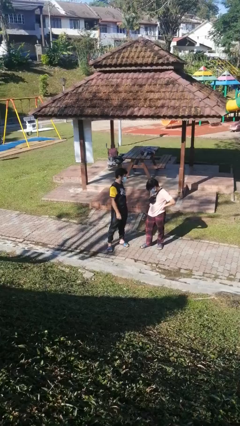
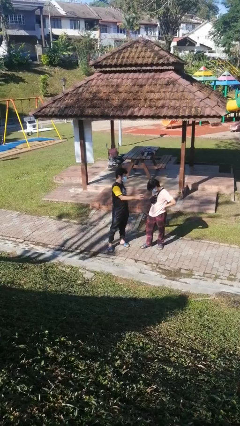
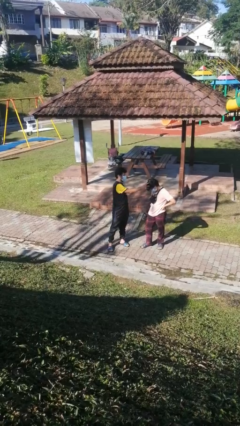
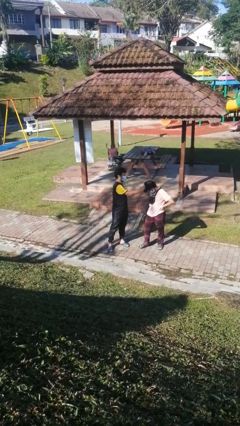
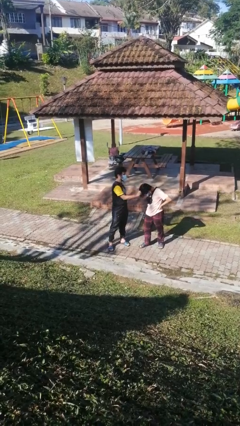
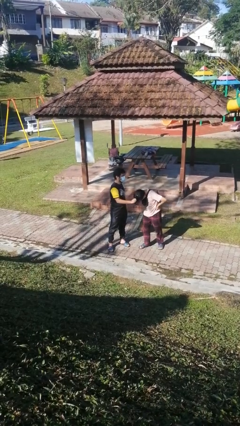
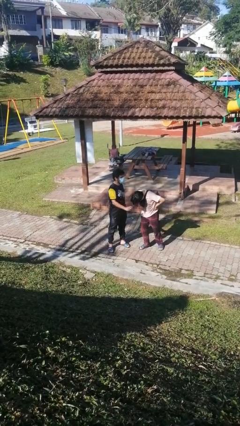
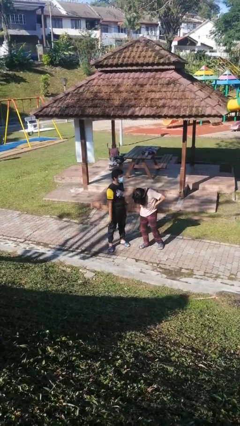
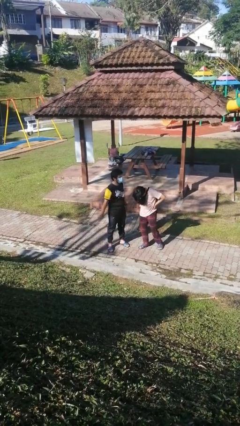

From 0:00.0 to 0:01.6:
person grabs person by hair

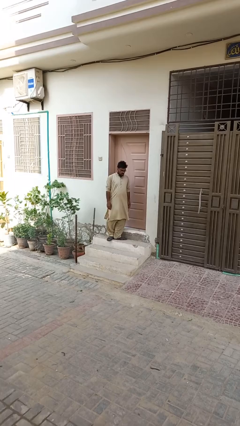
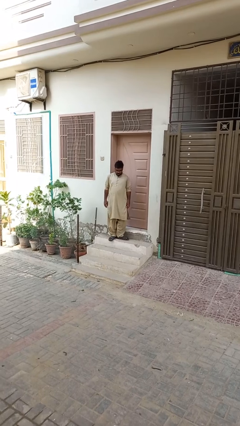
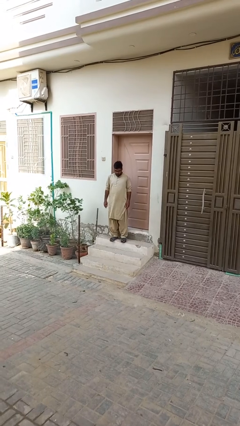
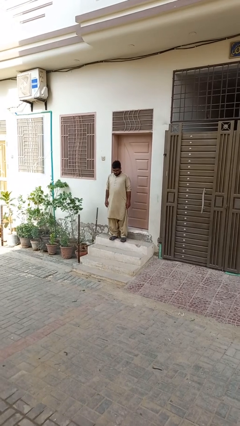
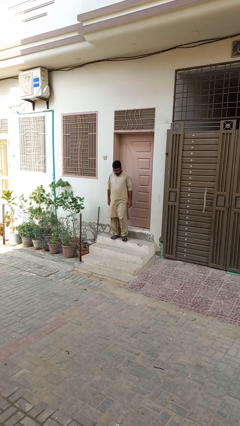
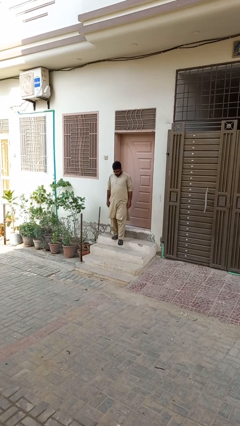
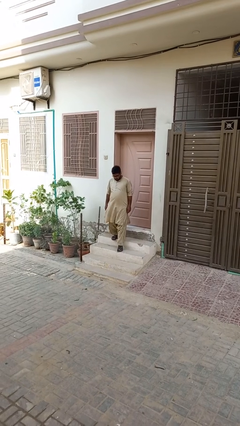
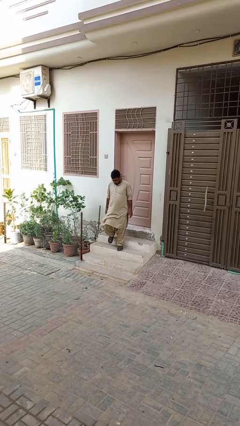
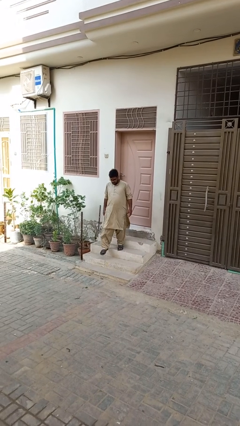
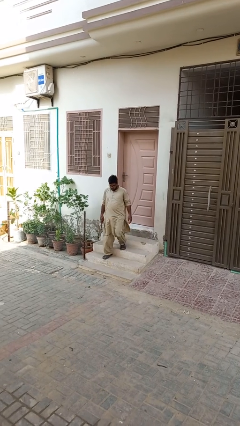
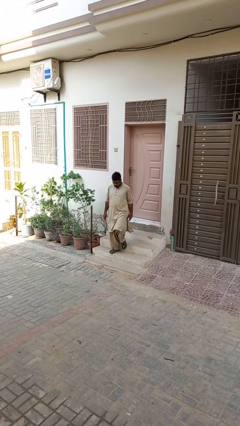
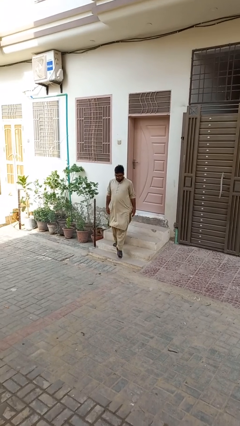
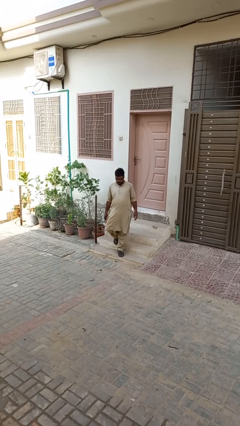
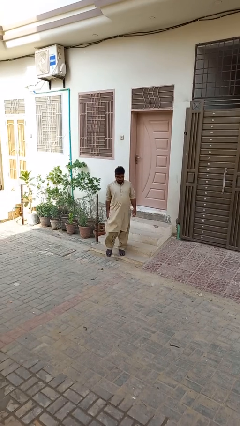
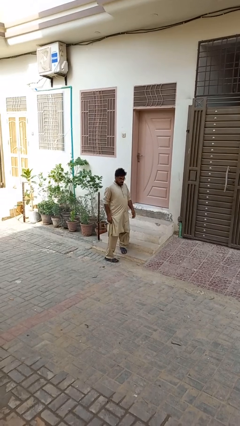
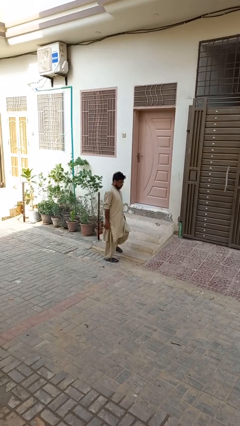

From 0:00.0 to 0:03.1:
person climbs down stairs

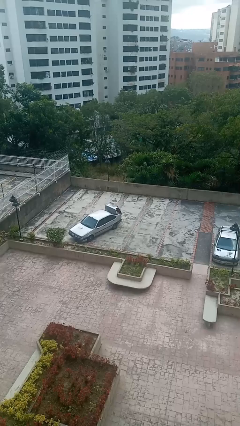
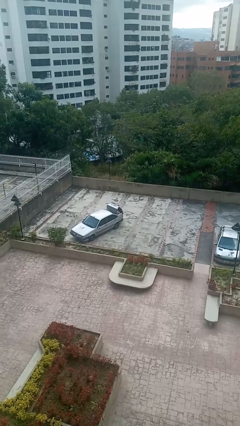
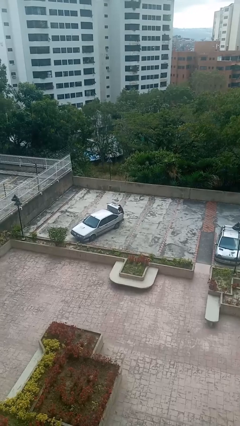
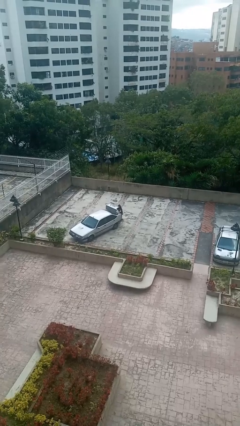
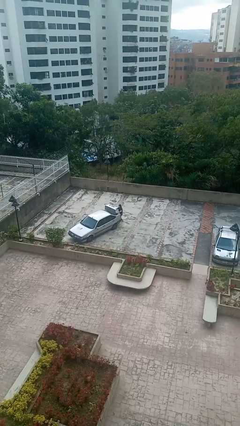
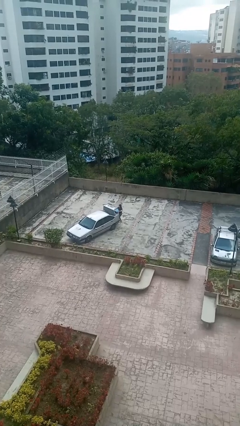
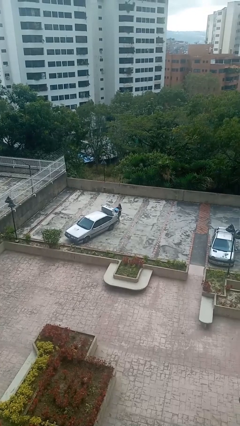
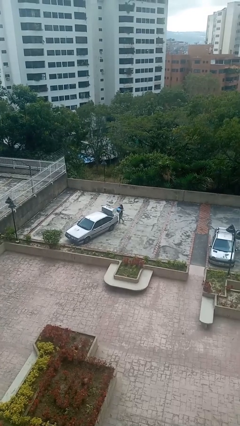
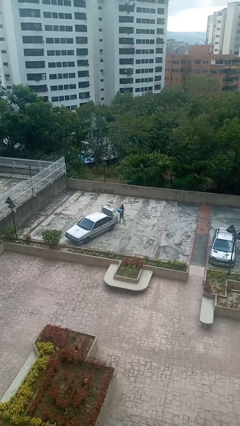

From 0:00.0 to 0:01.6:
person unloads car

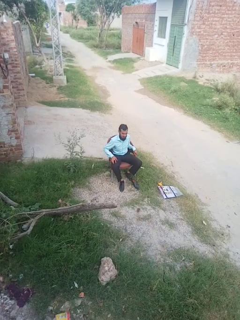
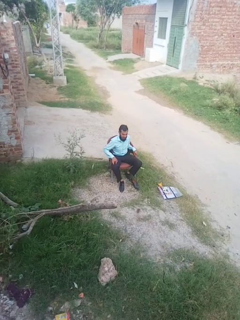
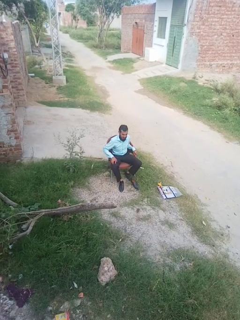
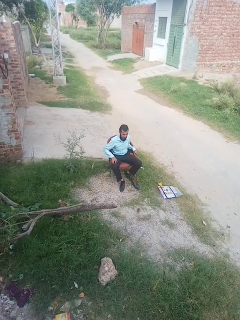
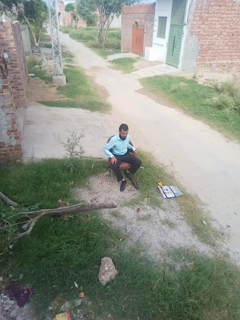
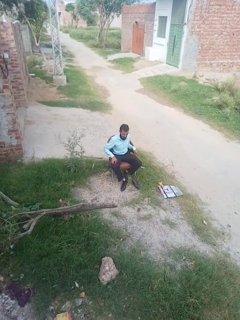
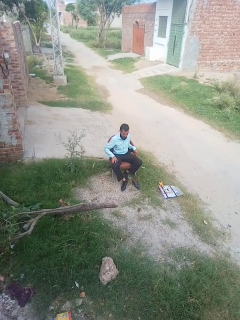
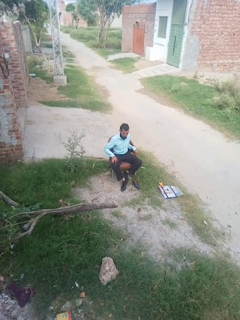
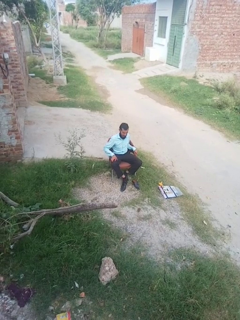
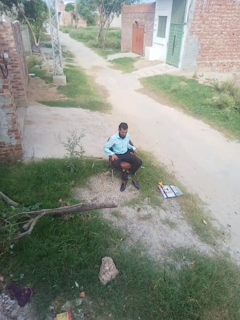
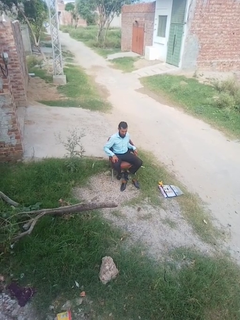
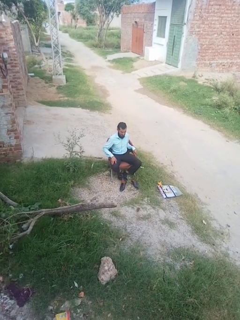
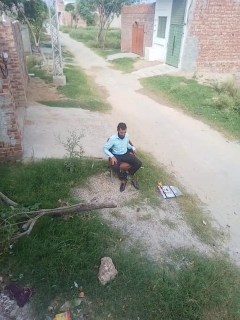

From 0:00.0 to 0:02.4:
person takes off shoes

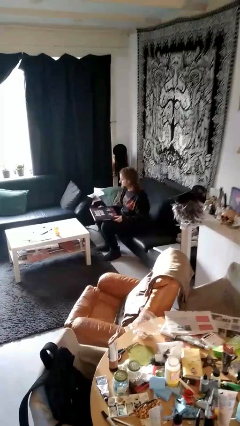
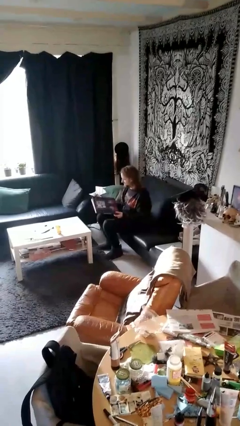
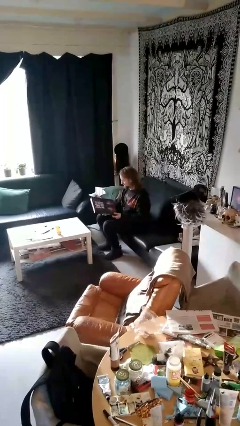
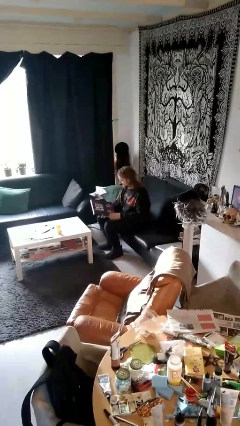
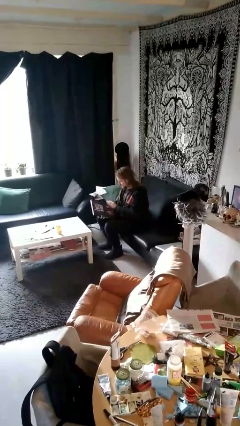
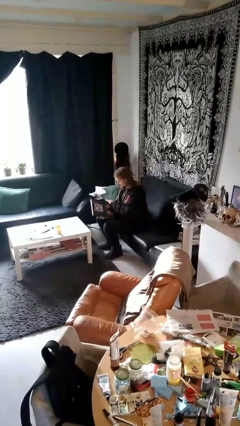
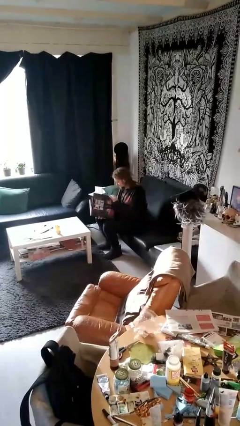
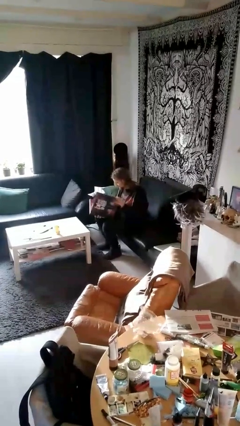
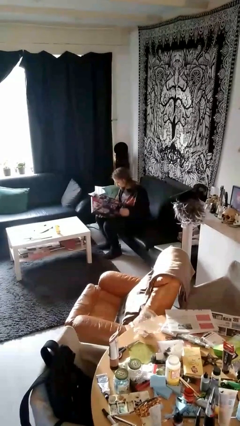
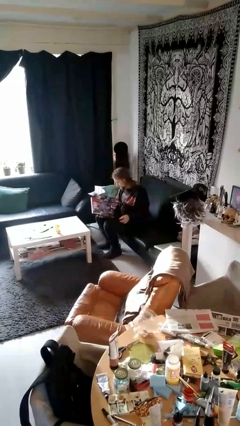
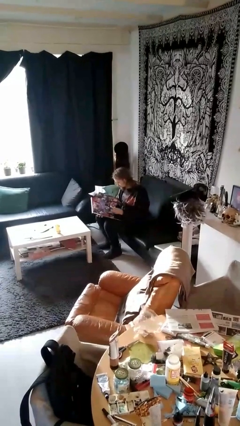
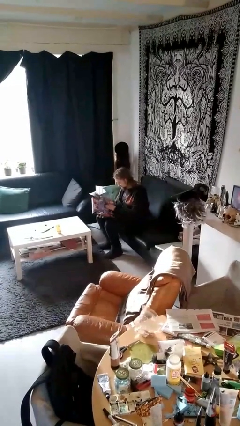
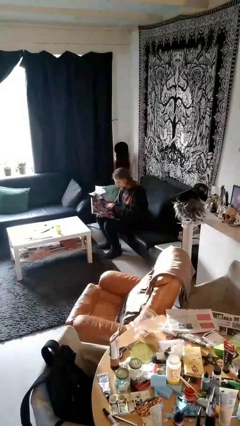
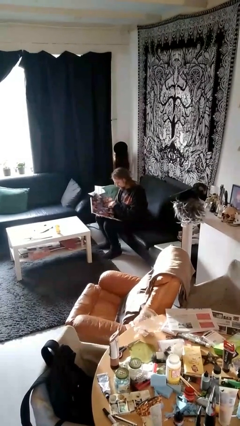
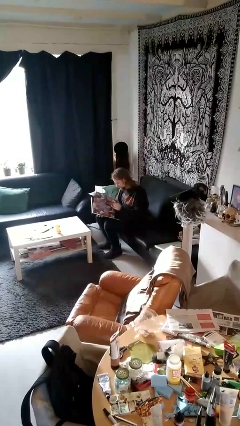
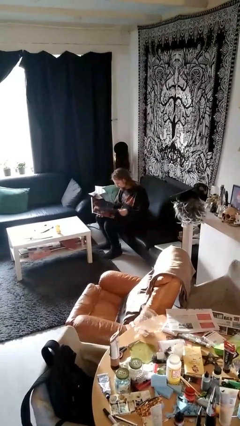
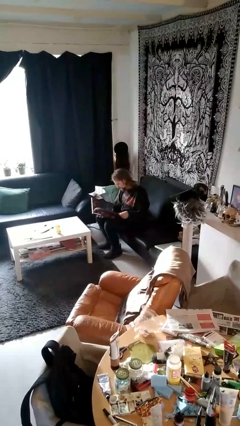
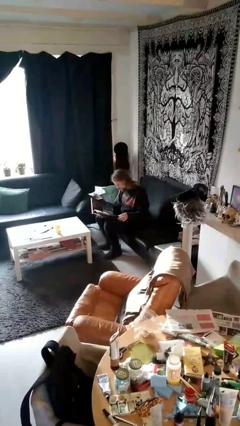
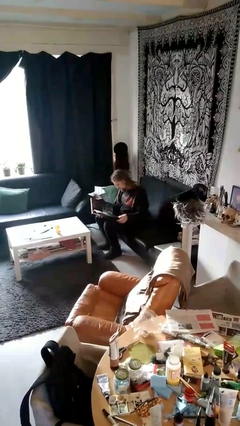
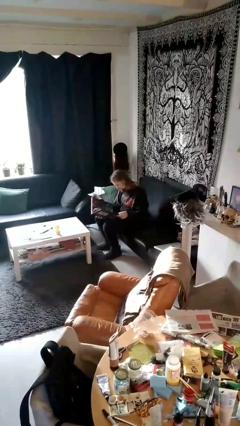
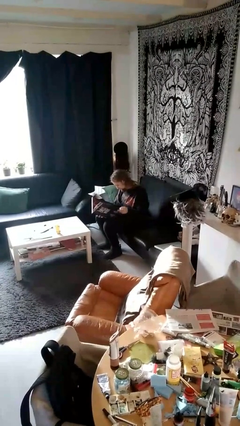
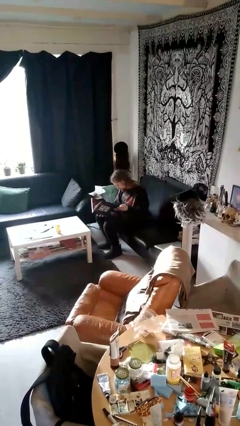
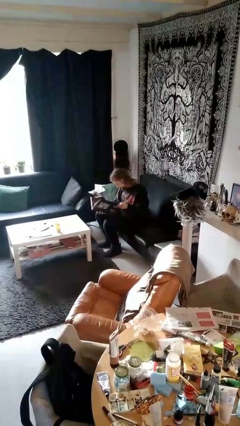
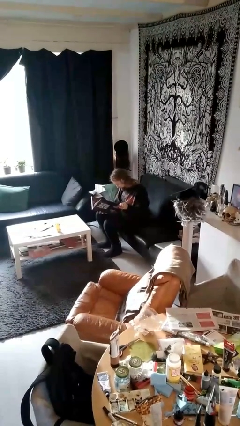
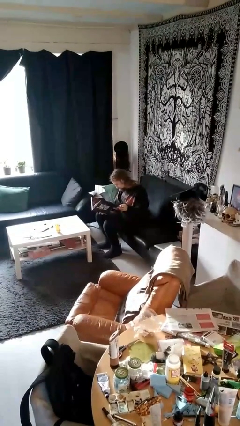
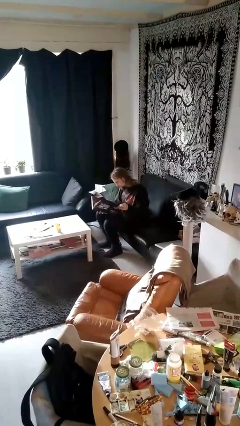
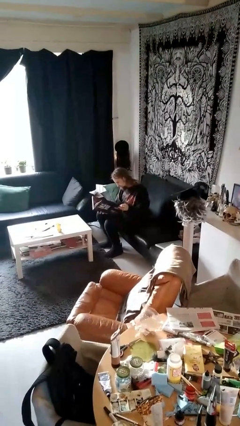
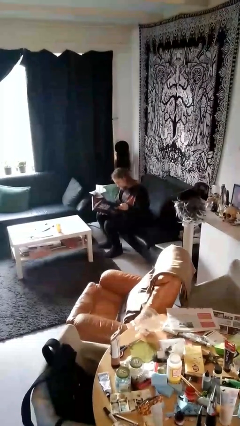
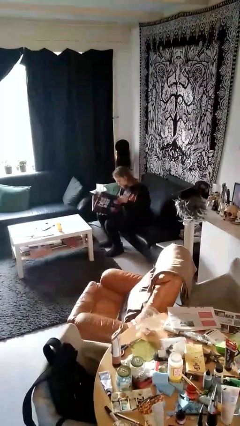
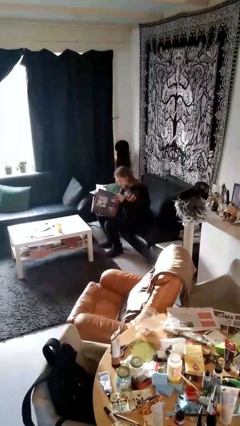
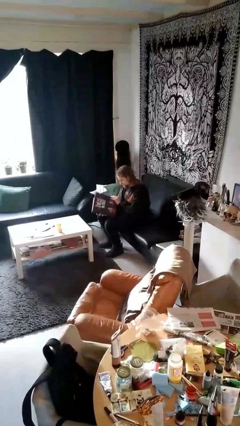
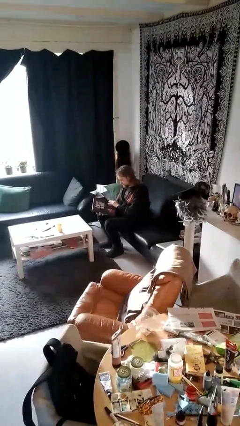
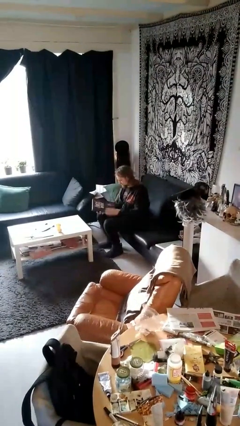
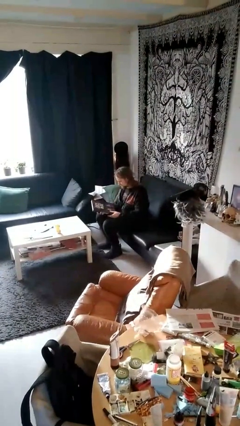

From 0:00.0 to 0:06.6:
person reads document

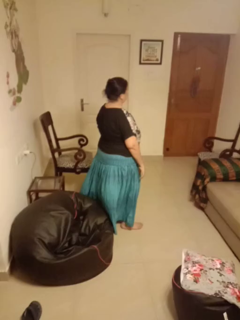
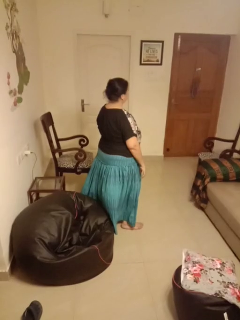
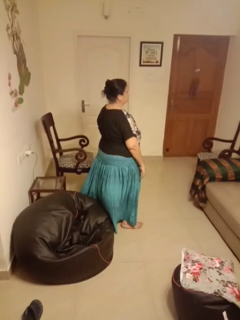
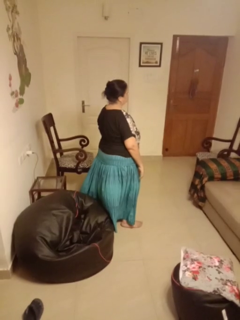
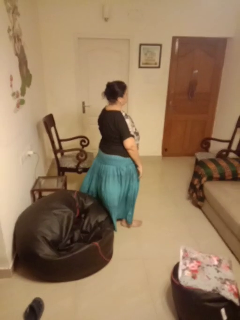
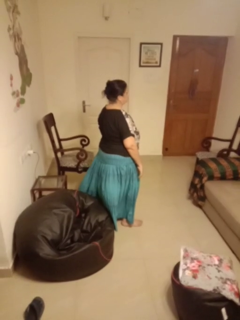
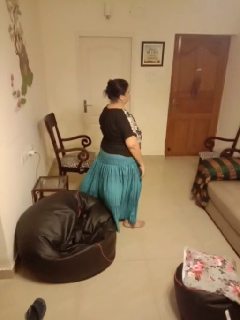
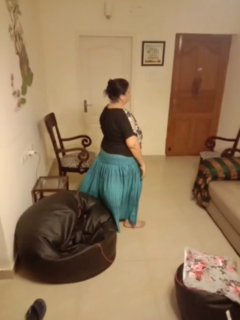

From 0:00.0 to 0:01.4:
person shakes head

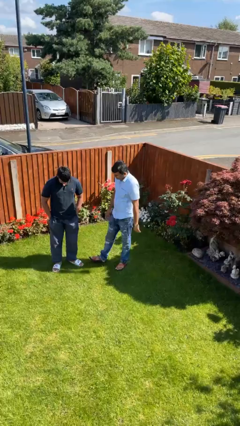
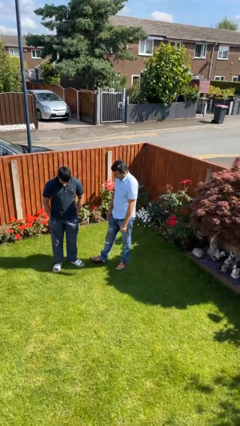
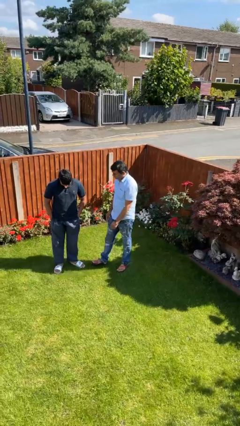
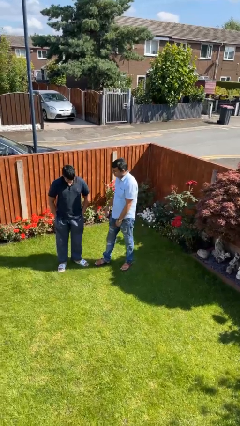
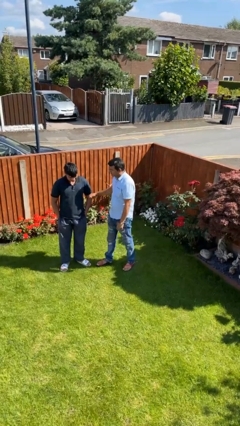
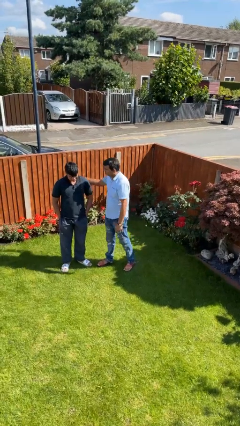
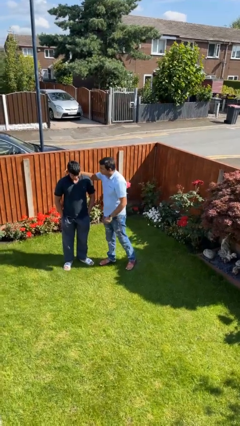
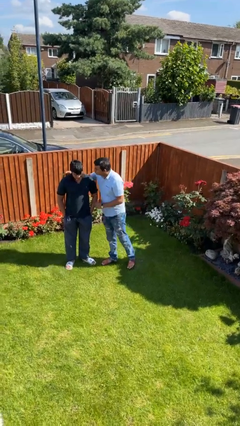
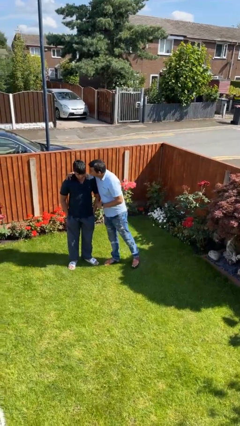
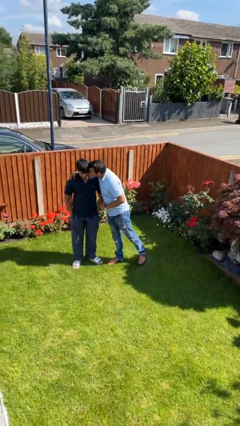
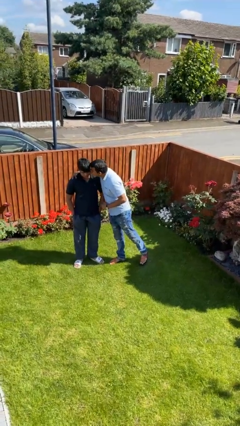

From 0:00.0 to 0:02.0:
person kisses cheek of person
